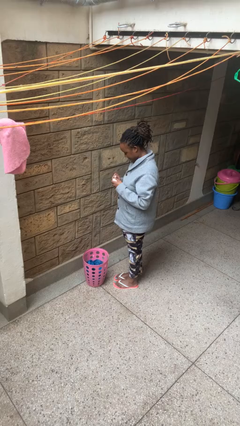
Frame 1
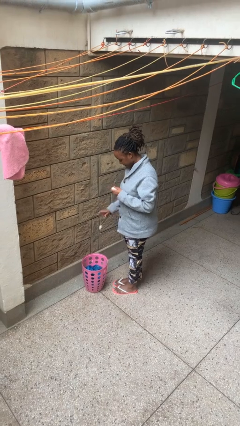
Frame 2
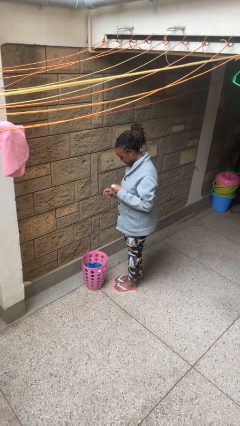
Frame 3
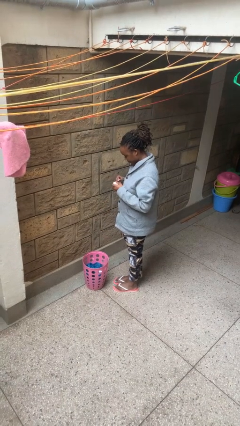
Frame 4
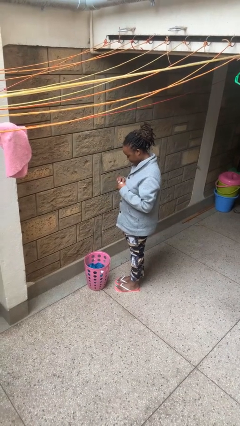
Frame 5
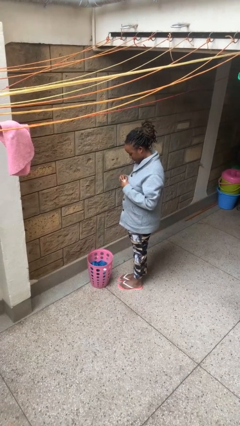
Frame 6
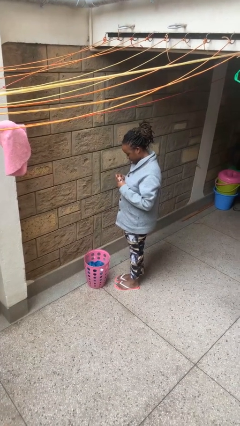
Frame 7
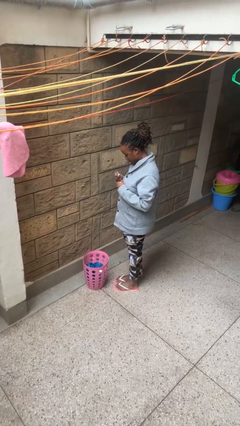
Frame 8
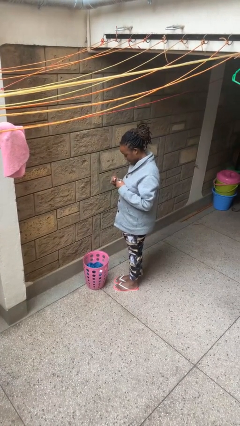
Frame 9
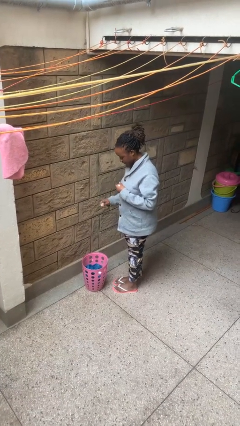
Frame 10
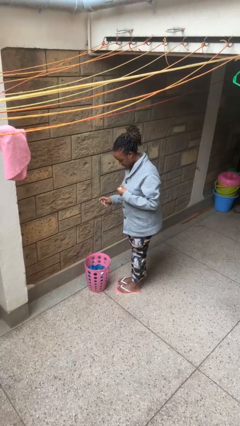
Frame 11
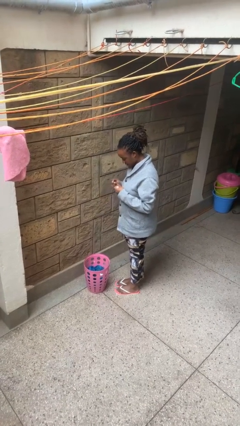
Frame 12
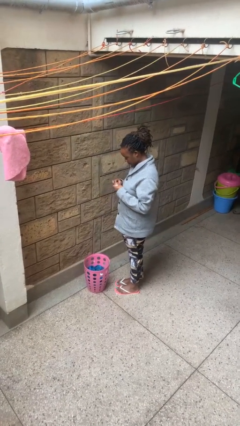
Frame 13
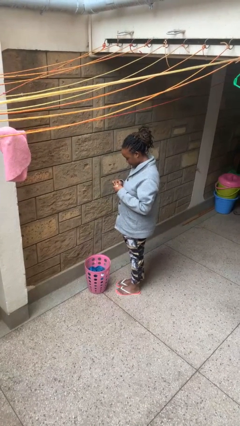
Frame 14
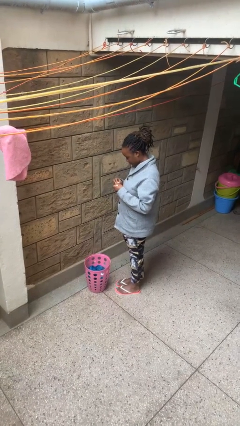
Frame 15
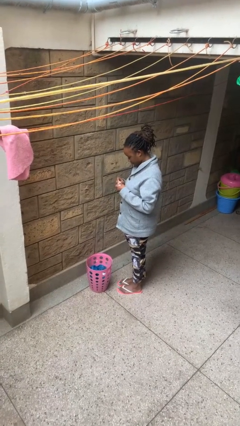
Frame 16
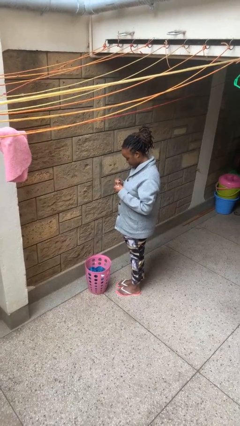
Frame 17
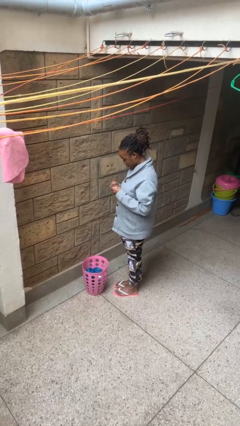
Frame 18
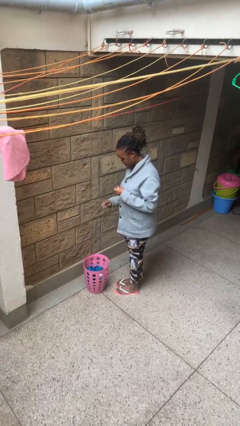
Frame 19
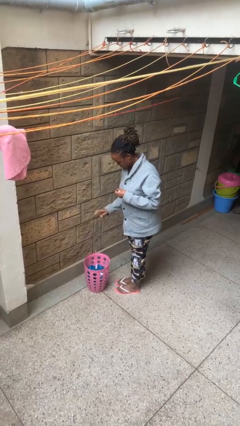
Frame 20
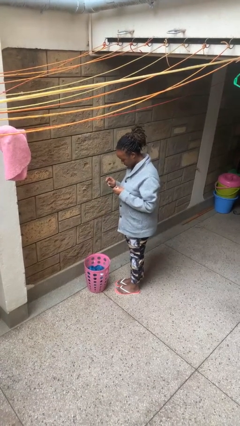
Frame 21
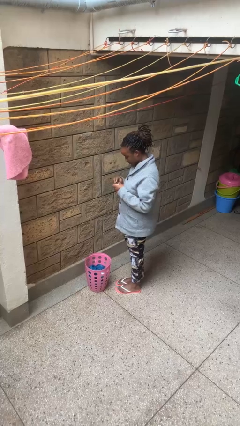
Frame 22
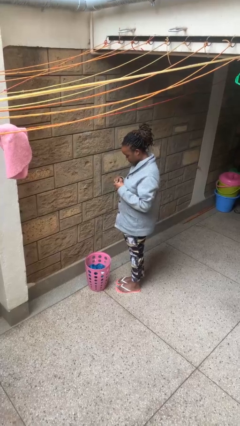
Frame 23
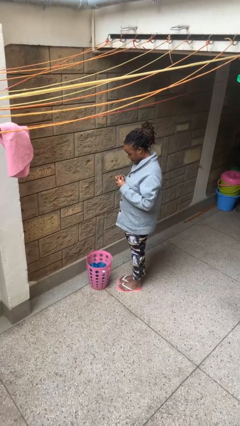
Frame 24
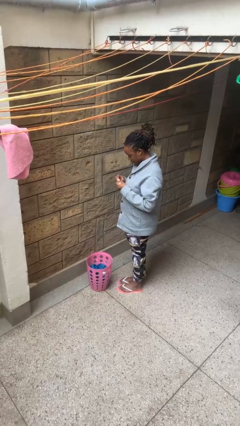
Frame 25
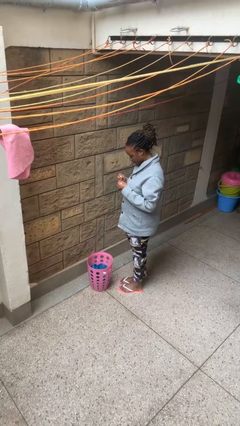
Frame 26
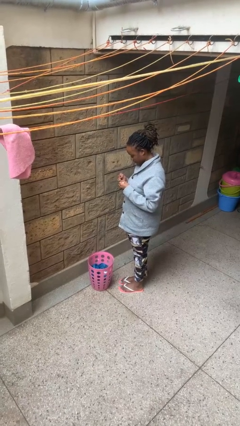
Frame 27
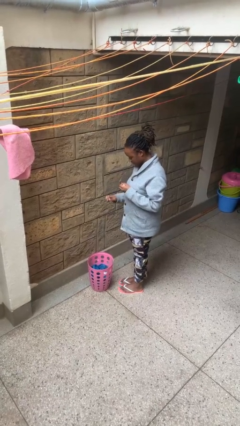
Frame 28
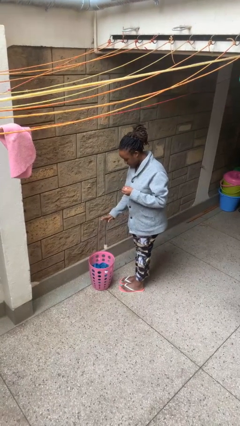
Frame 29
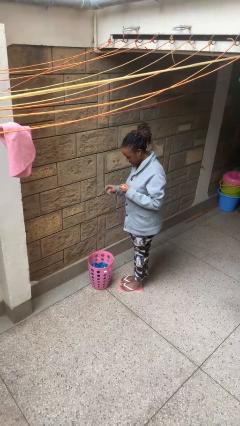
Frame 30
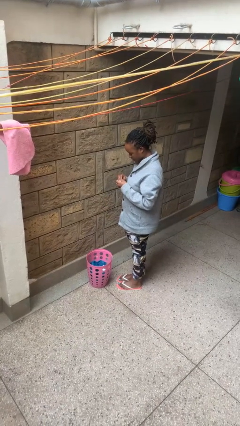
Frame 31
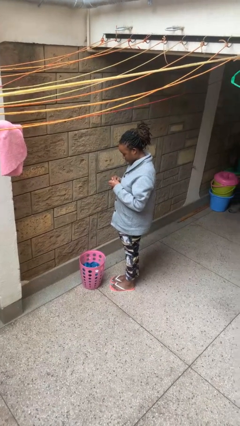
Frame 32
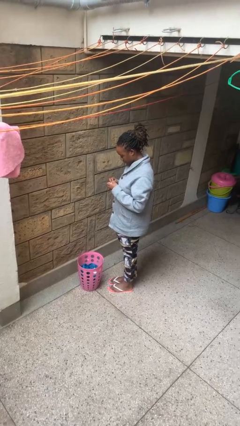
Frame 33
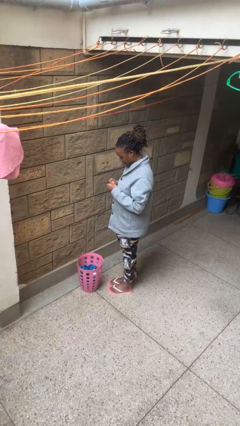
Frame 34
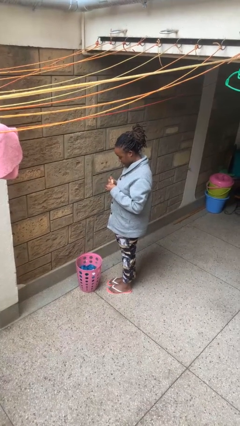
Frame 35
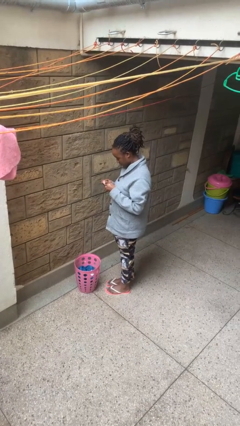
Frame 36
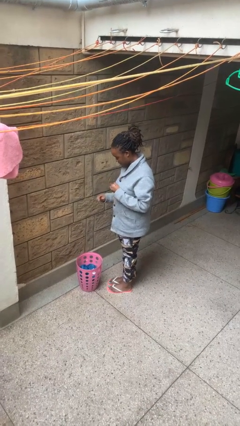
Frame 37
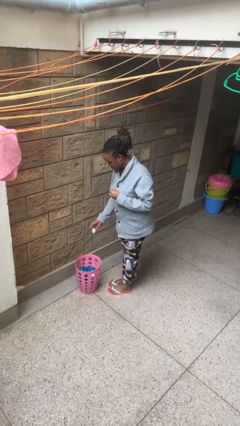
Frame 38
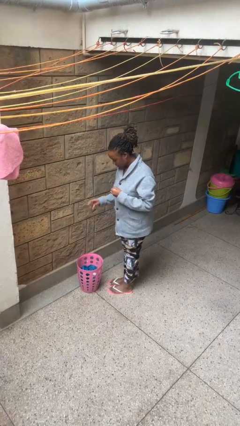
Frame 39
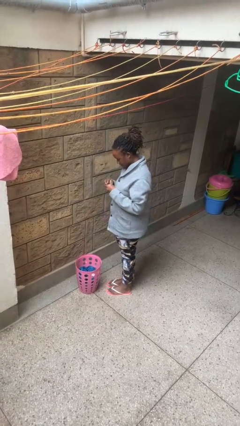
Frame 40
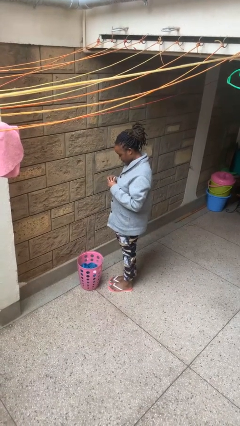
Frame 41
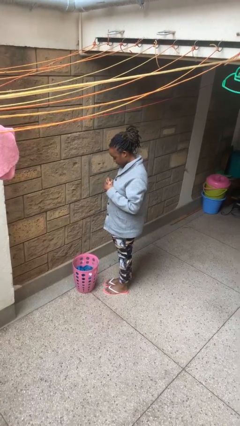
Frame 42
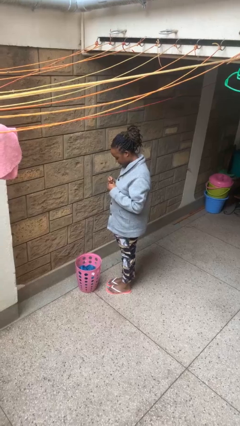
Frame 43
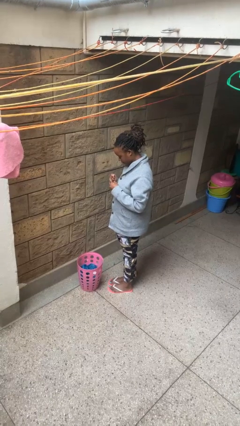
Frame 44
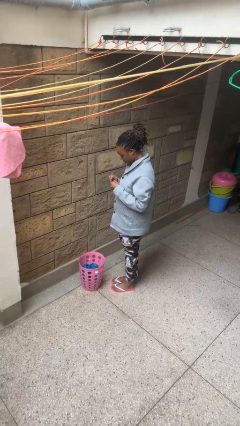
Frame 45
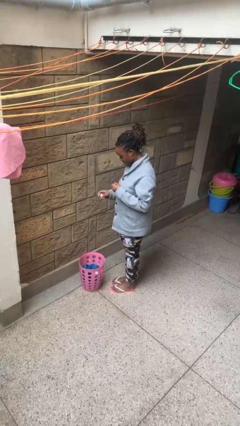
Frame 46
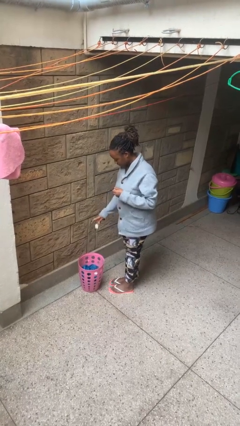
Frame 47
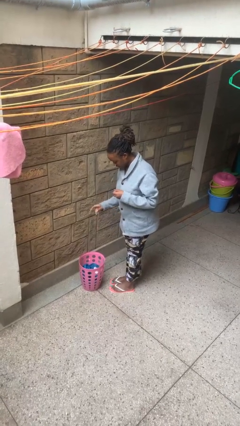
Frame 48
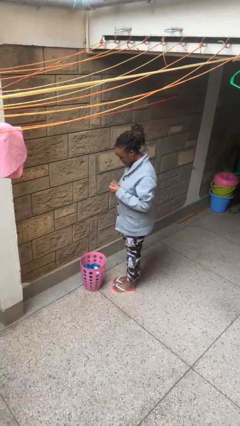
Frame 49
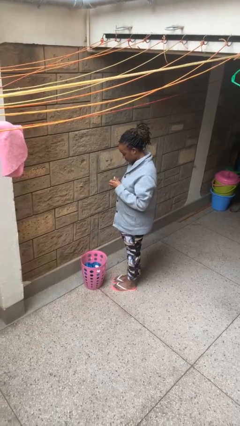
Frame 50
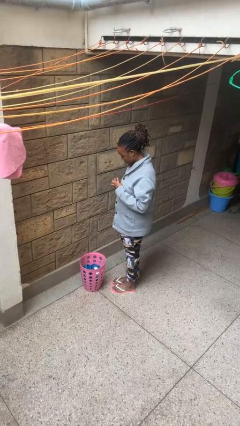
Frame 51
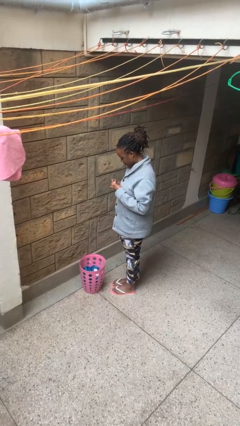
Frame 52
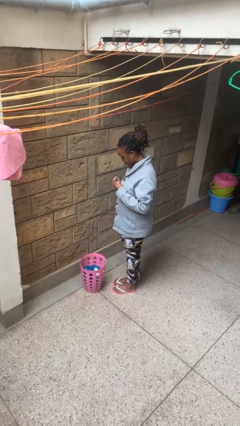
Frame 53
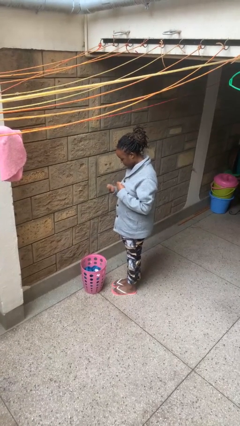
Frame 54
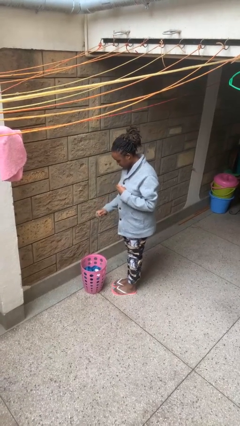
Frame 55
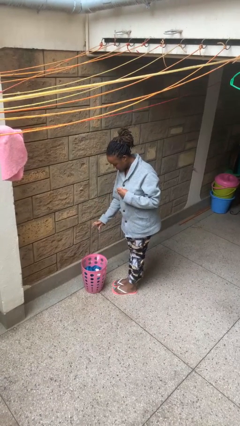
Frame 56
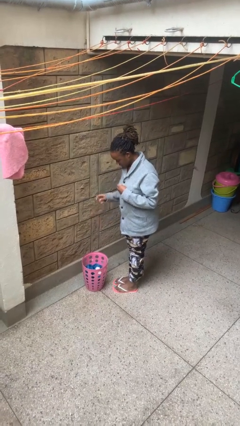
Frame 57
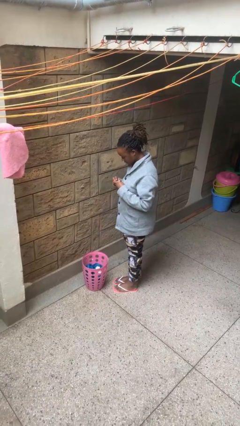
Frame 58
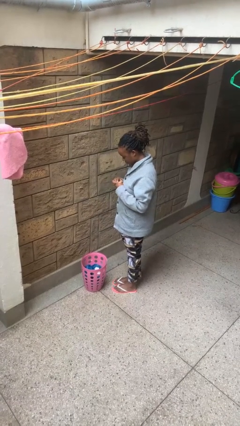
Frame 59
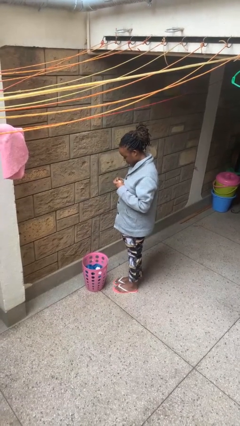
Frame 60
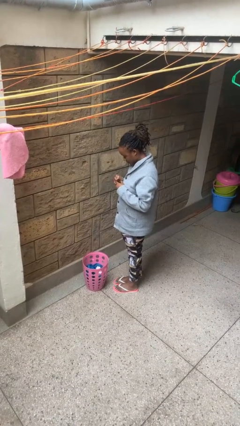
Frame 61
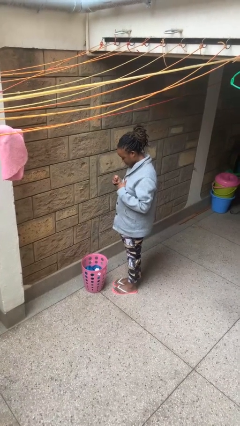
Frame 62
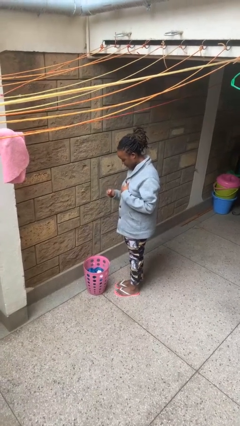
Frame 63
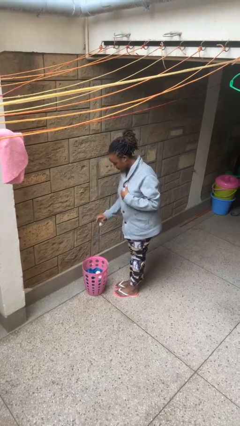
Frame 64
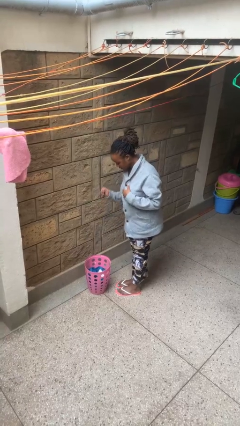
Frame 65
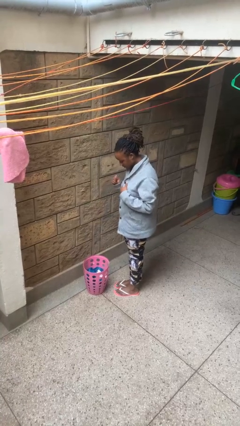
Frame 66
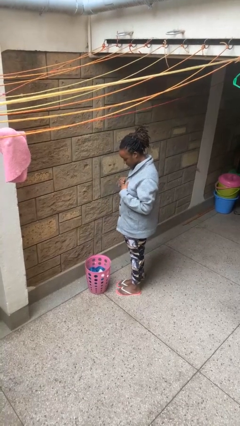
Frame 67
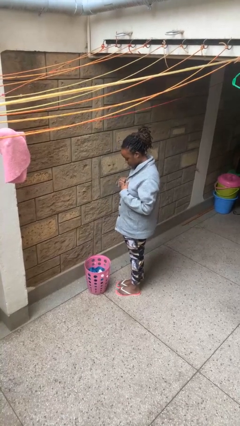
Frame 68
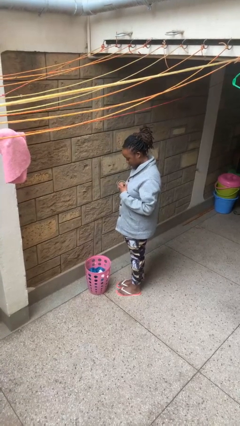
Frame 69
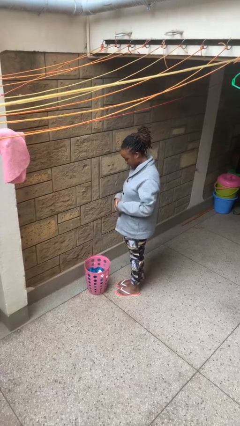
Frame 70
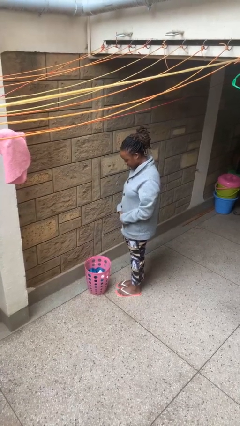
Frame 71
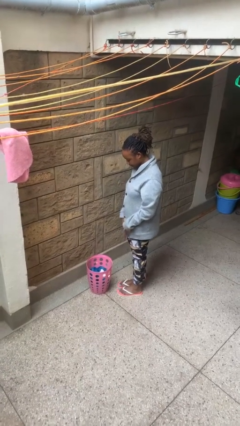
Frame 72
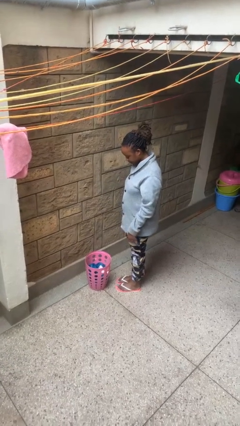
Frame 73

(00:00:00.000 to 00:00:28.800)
person discards trash

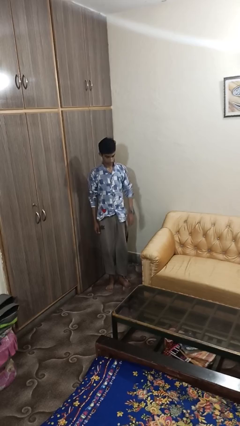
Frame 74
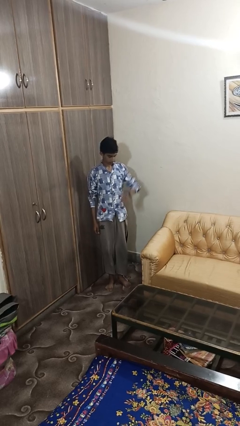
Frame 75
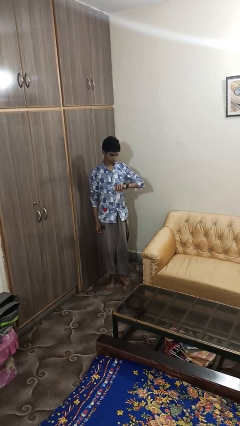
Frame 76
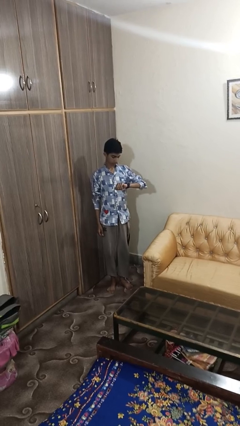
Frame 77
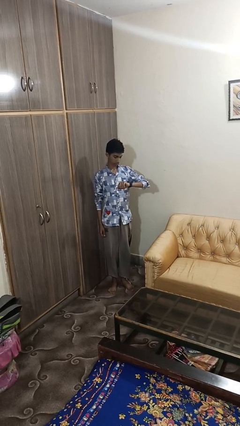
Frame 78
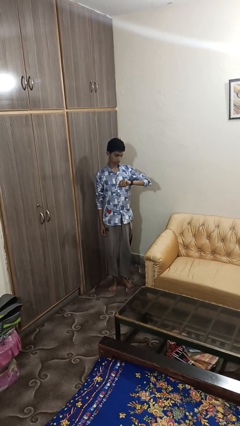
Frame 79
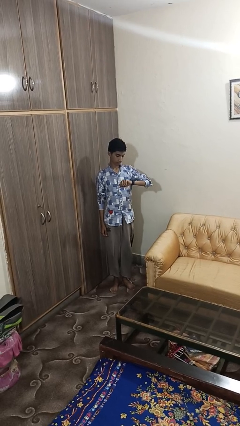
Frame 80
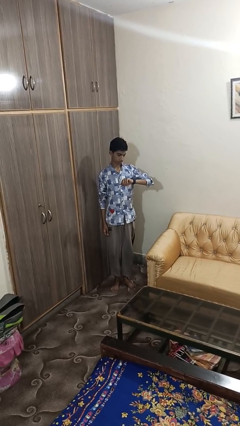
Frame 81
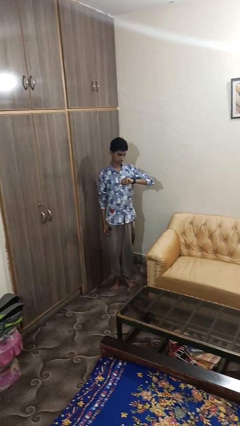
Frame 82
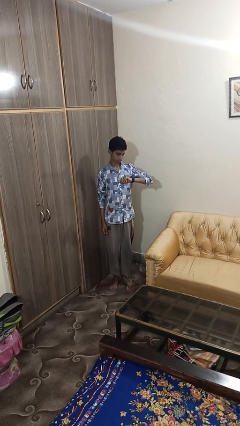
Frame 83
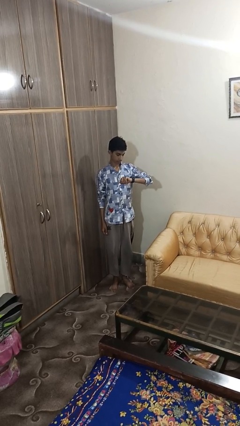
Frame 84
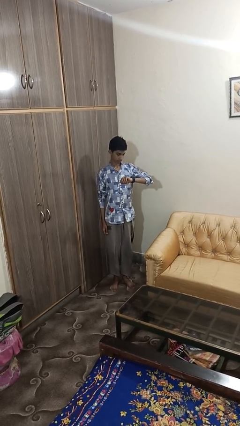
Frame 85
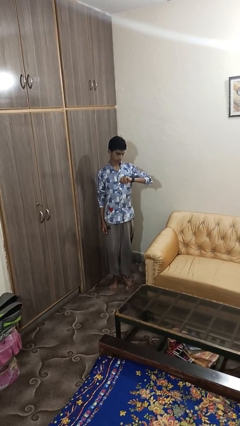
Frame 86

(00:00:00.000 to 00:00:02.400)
person looks at wristwatch

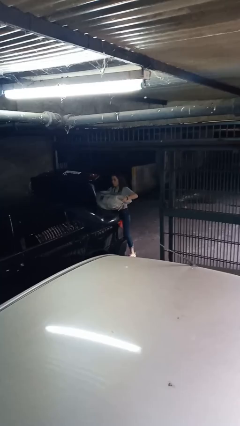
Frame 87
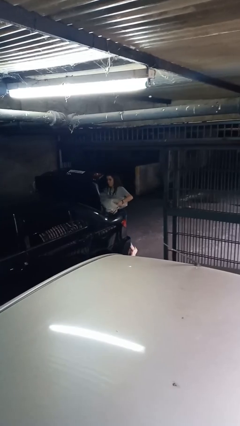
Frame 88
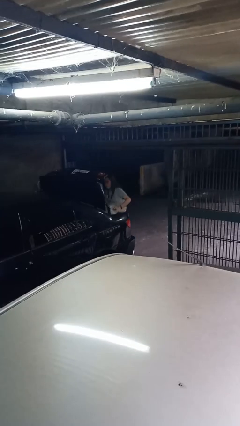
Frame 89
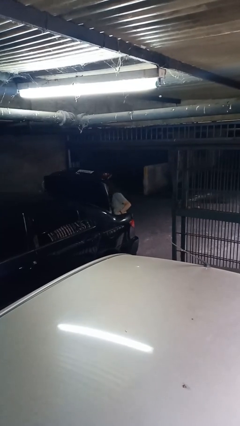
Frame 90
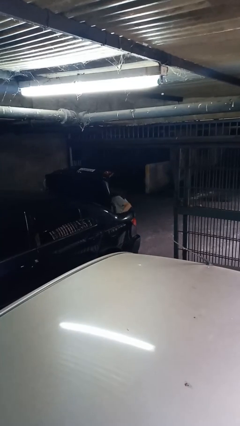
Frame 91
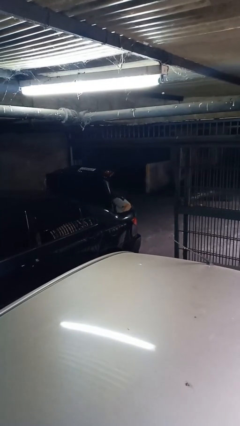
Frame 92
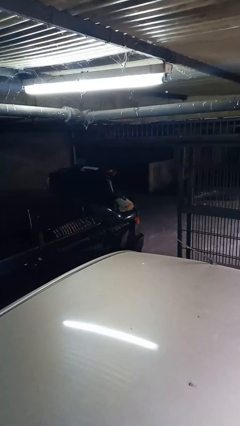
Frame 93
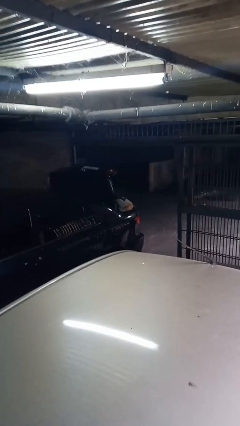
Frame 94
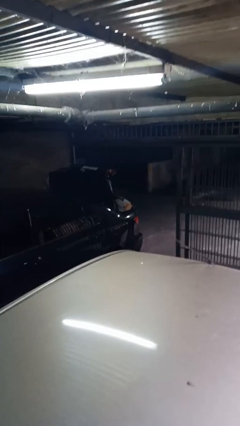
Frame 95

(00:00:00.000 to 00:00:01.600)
person loads car
